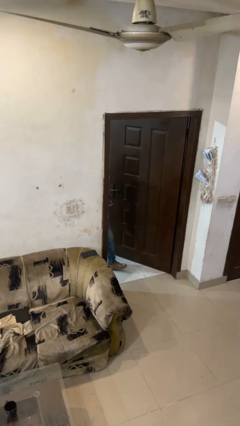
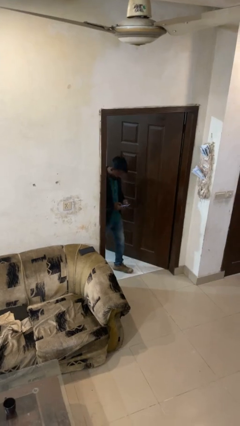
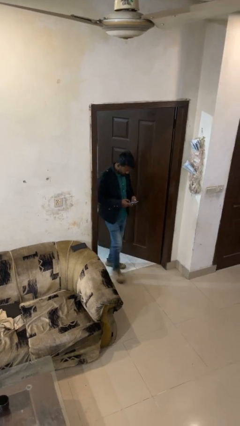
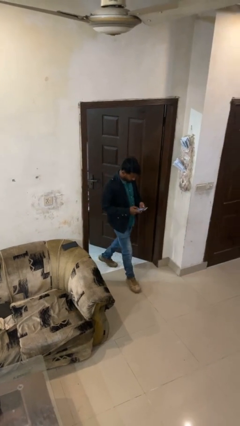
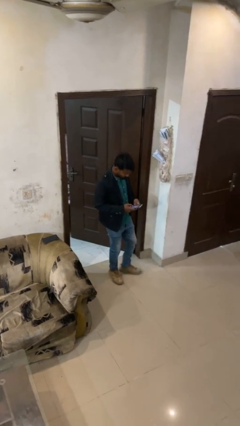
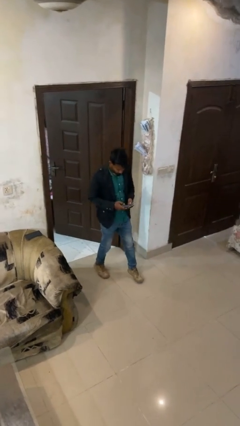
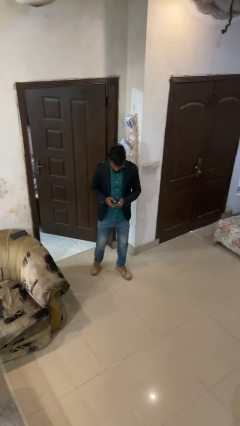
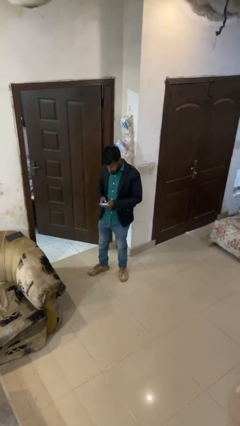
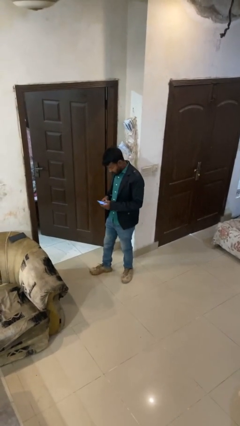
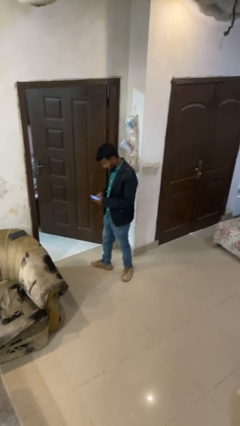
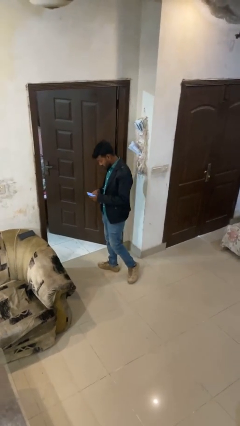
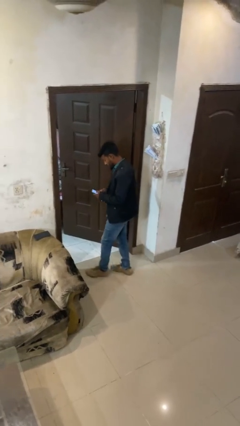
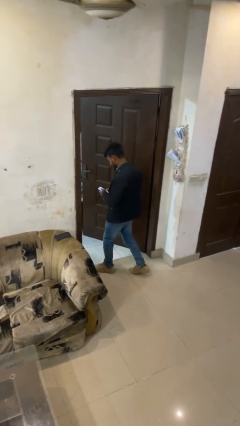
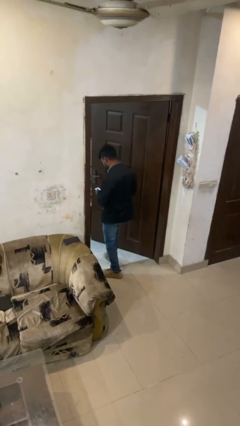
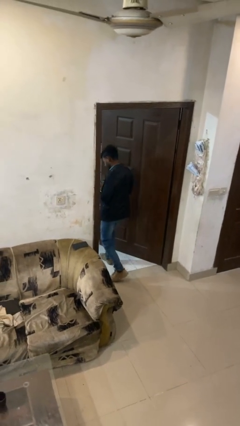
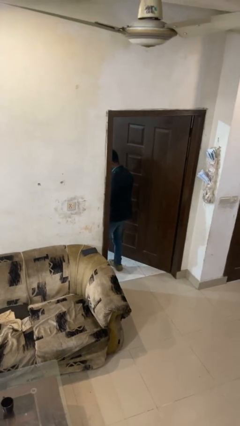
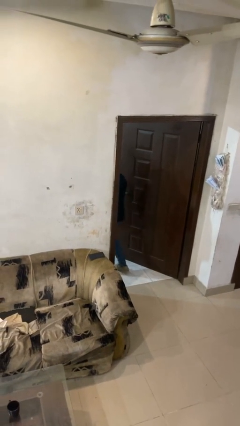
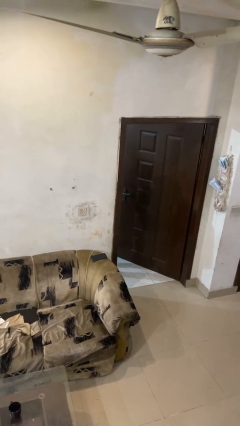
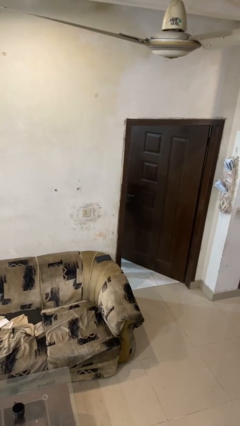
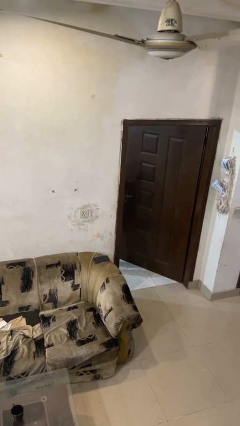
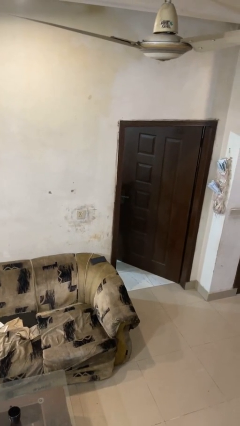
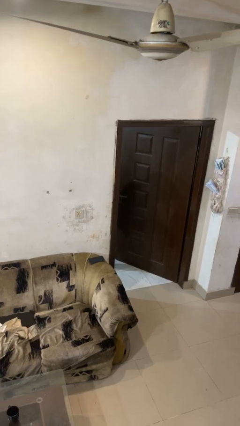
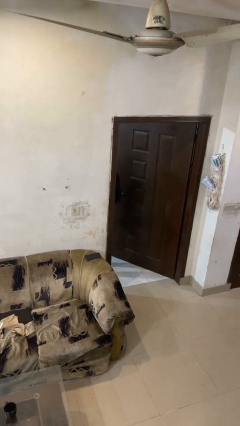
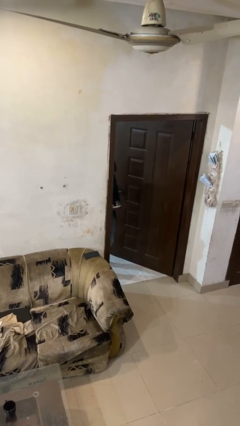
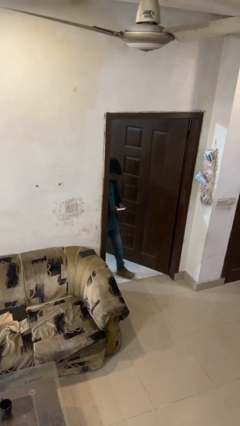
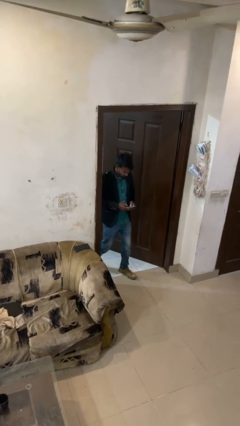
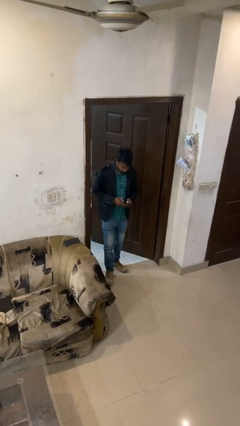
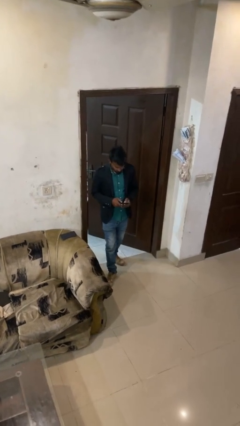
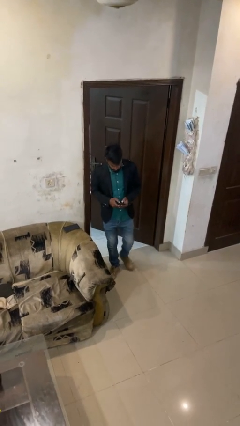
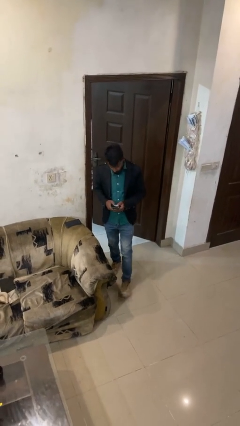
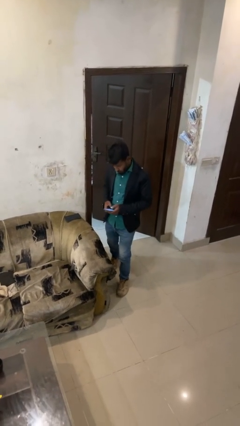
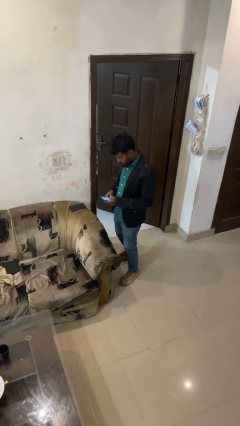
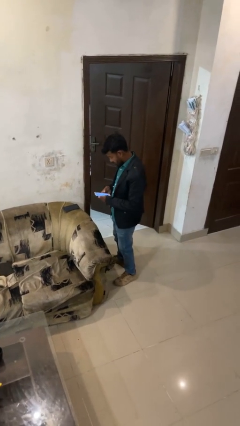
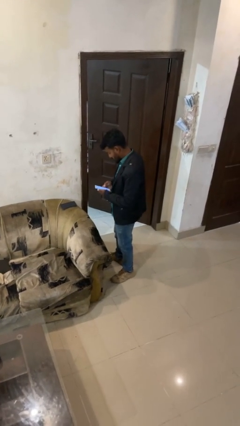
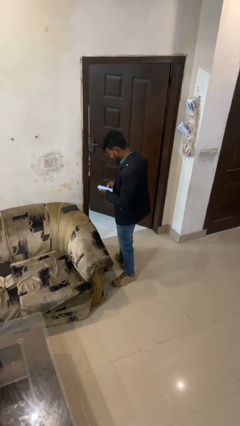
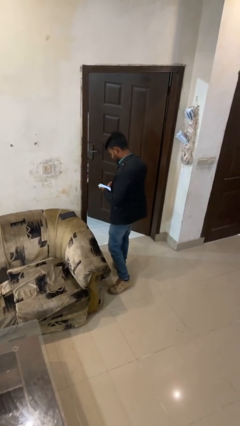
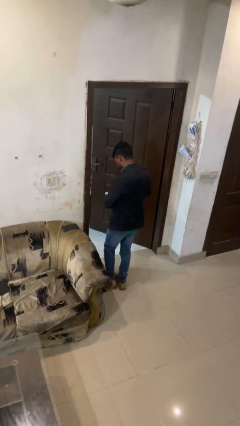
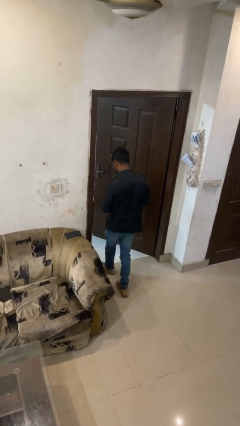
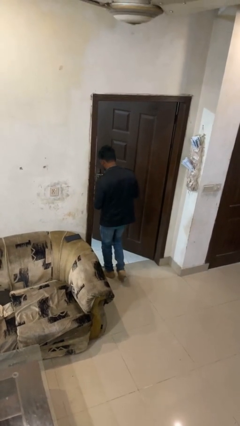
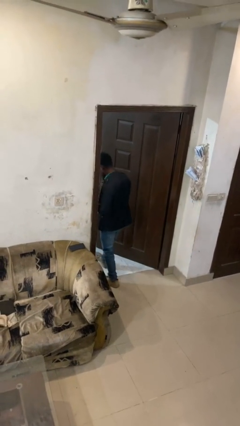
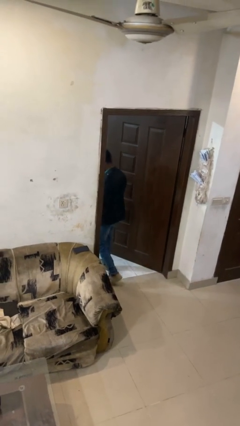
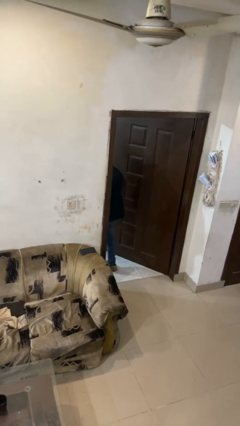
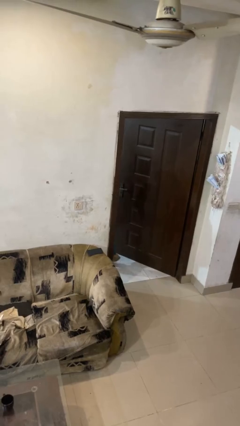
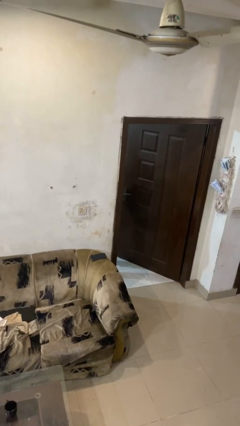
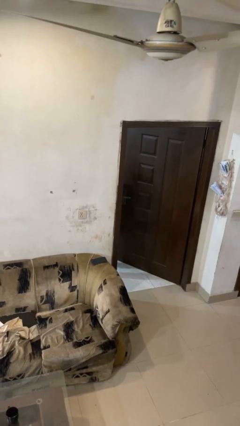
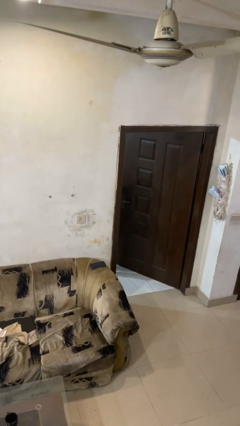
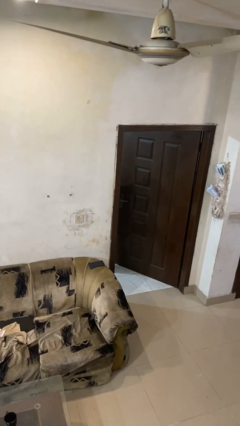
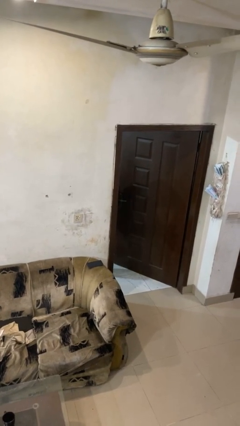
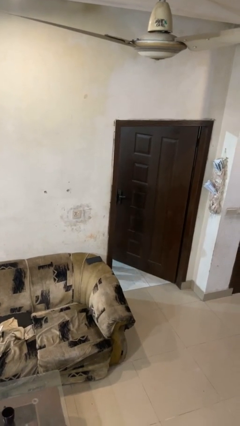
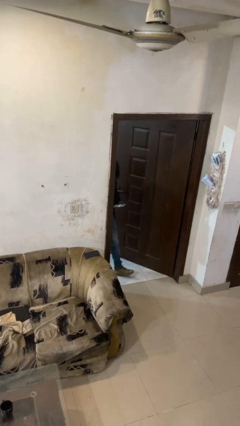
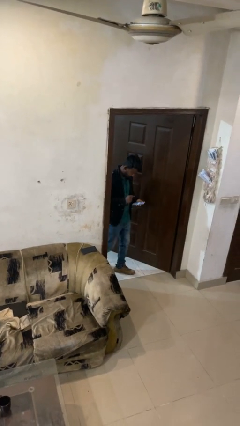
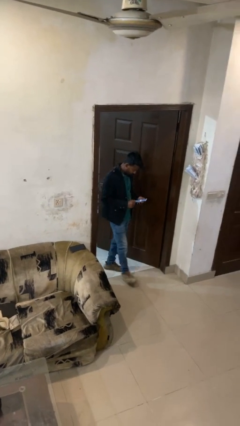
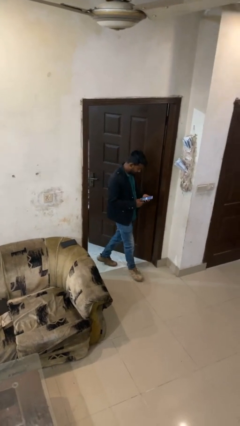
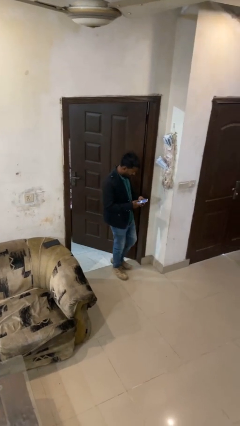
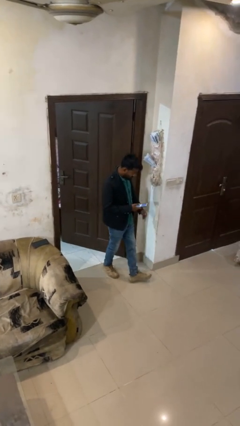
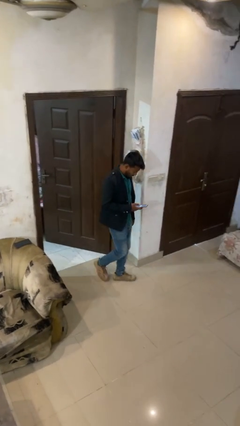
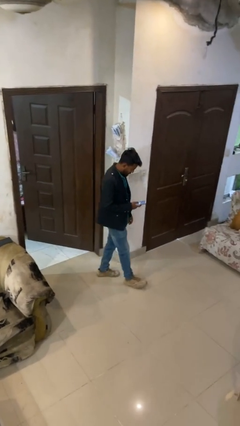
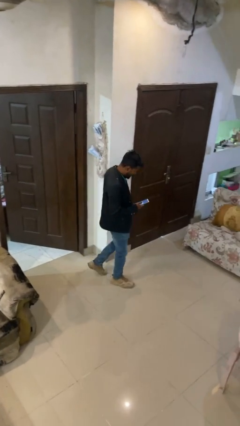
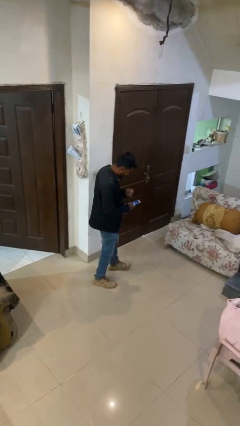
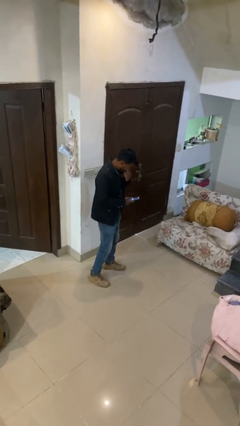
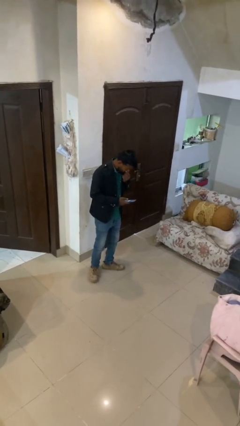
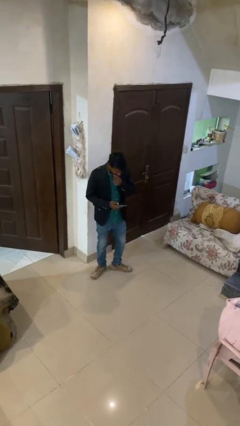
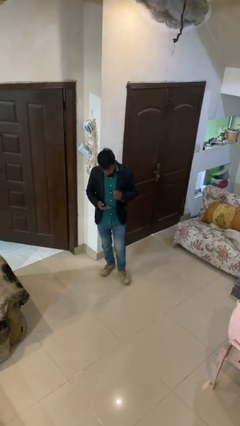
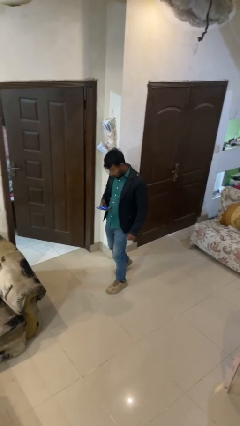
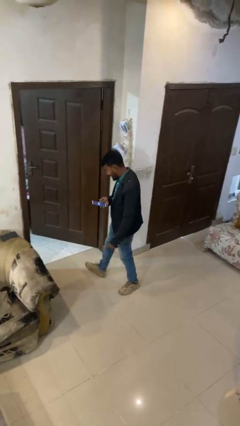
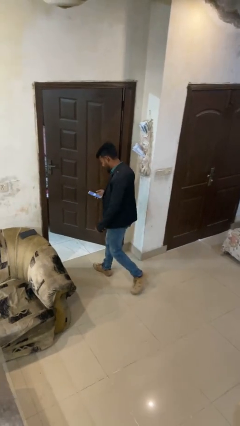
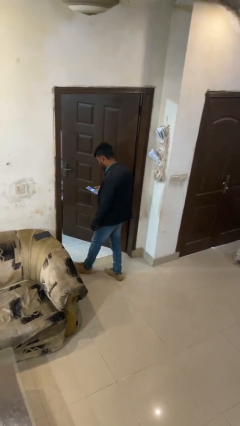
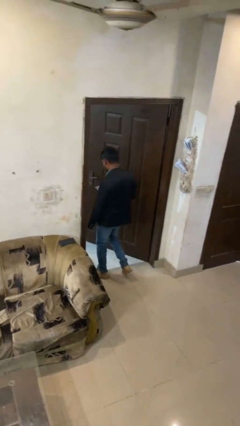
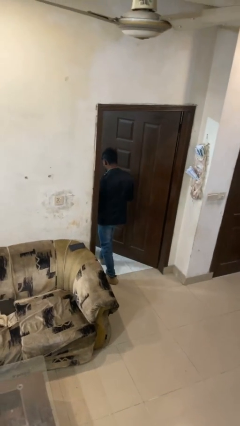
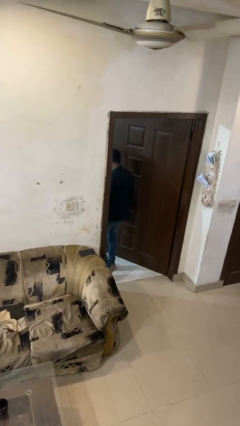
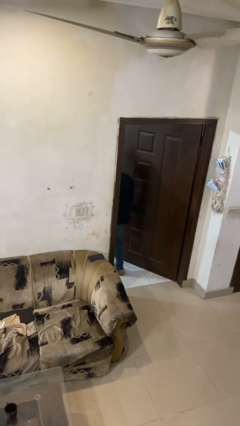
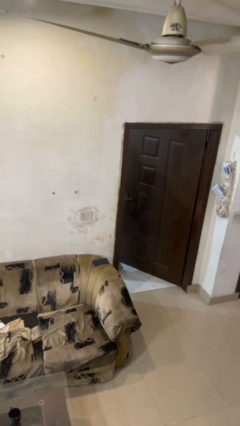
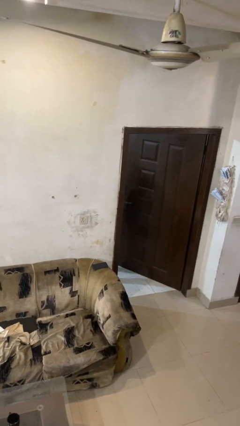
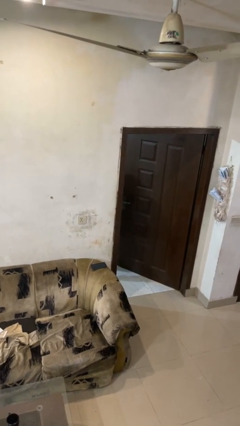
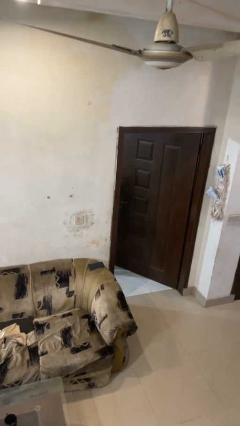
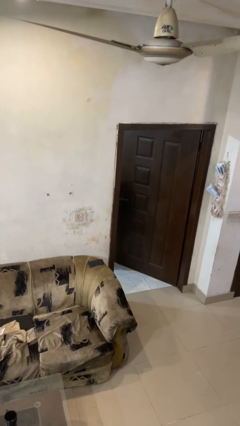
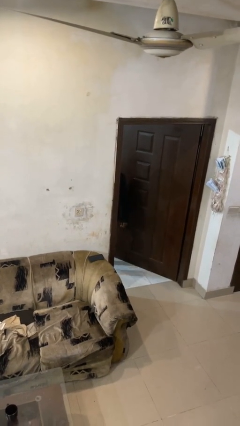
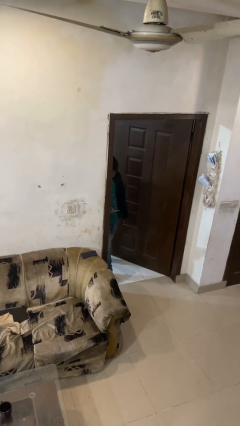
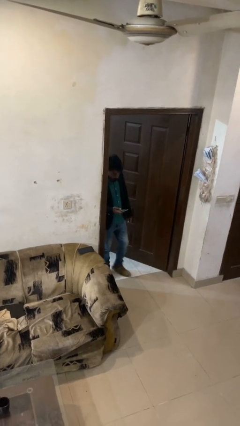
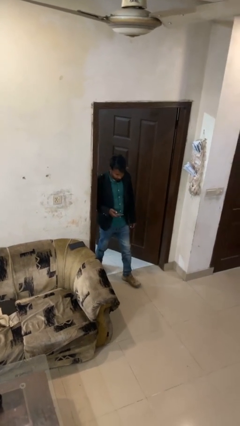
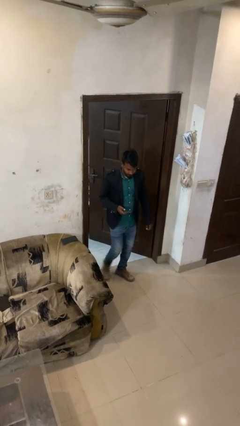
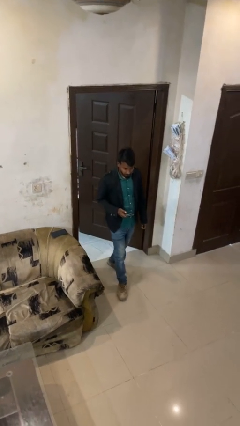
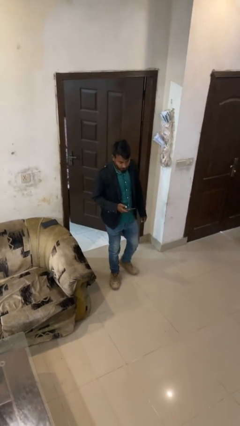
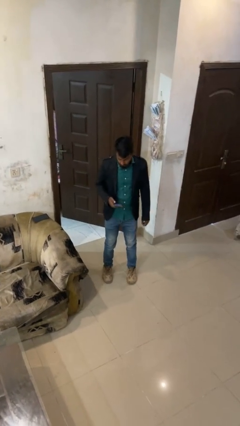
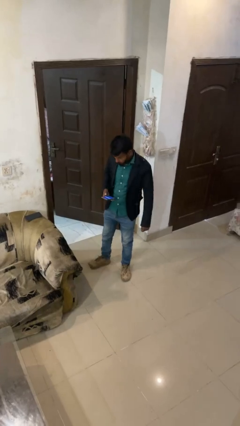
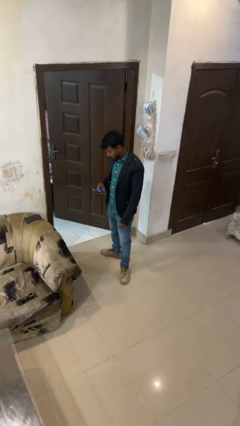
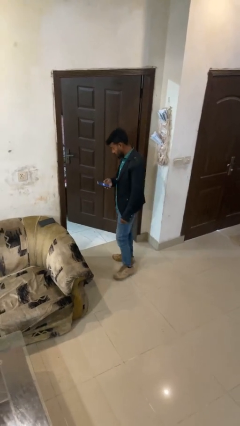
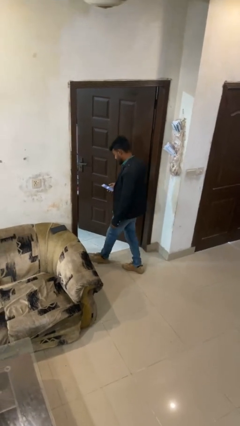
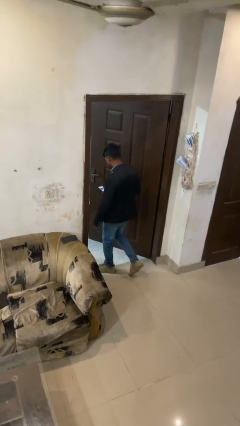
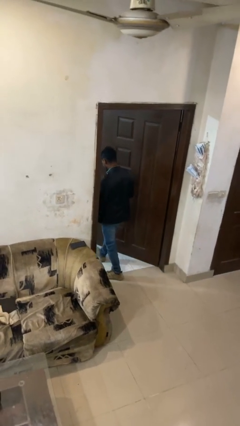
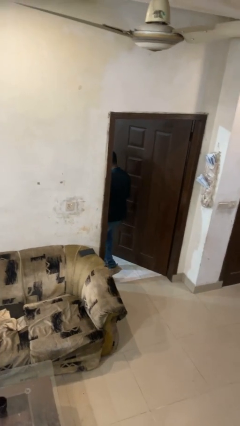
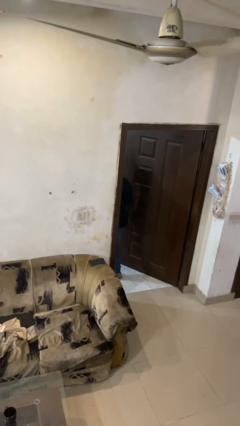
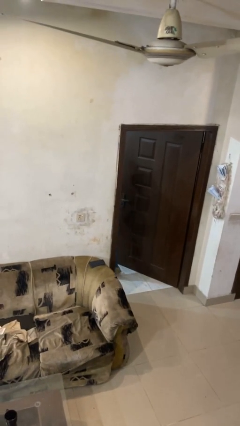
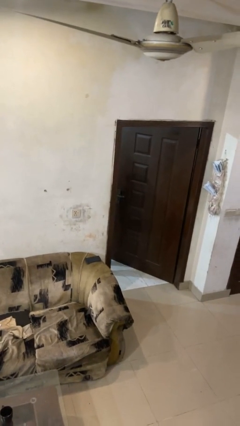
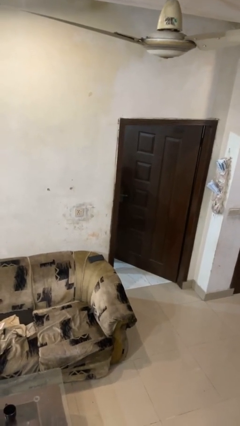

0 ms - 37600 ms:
person texts on phone
